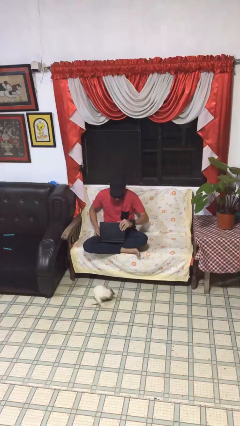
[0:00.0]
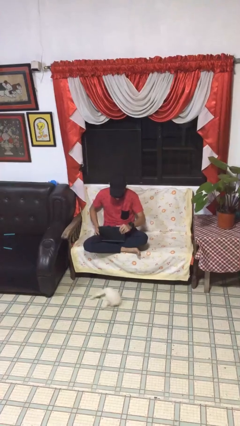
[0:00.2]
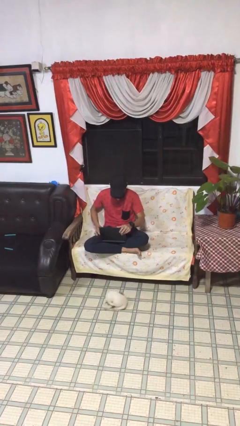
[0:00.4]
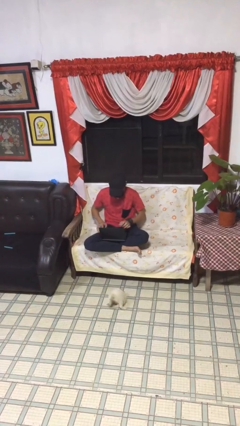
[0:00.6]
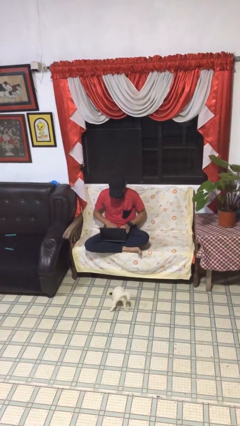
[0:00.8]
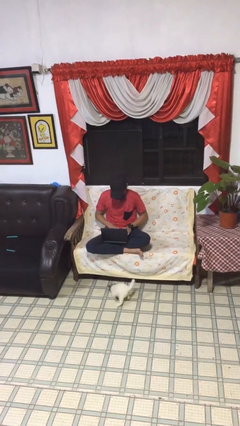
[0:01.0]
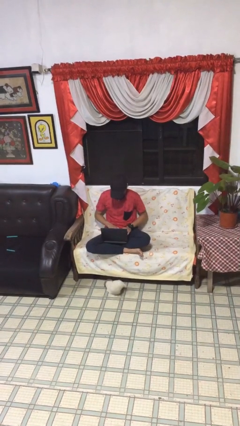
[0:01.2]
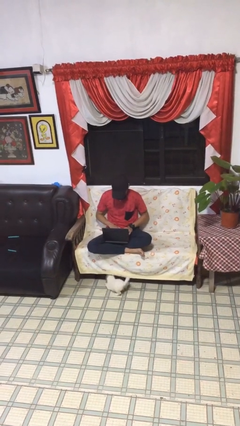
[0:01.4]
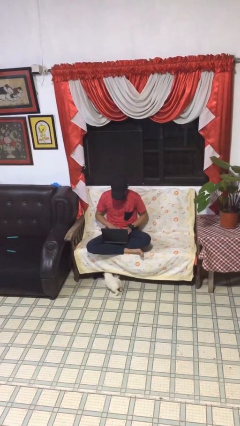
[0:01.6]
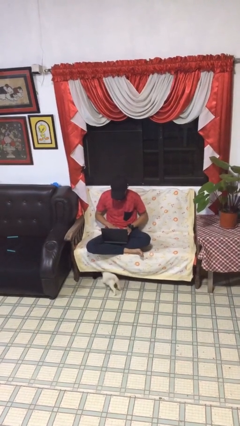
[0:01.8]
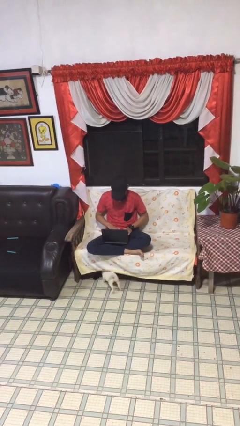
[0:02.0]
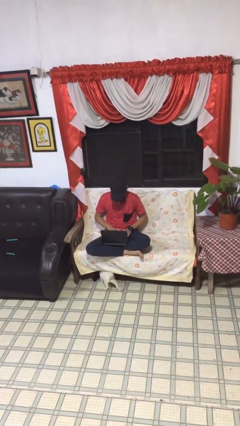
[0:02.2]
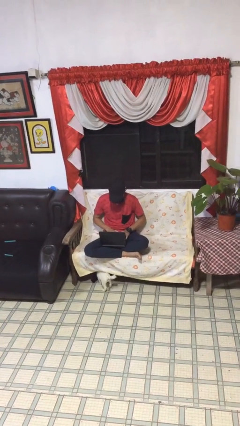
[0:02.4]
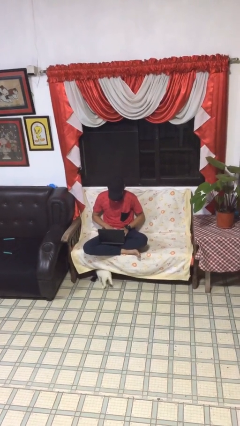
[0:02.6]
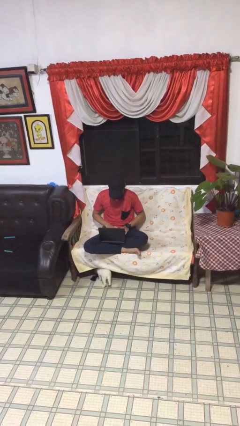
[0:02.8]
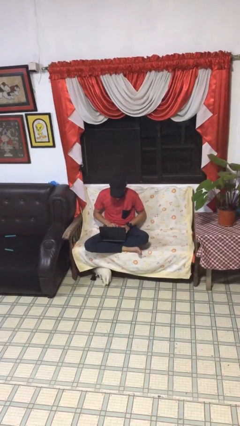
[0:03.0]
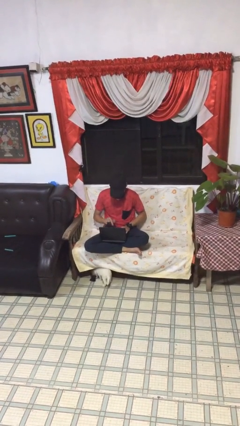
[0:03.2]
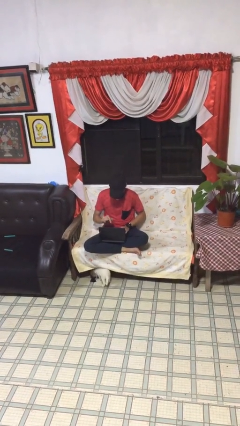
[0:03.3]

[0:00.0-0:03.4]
person interacts with laptop

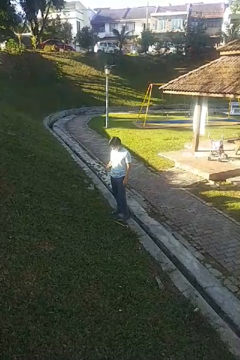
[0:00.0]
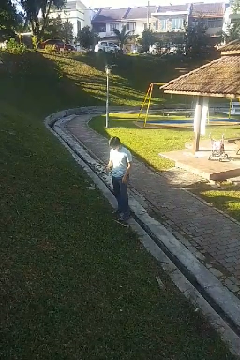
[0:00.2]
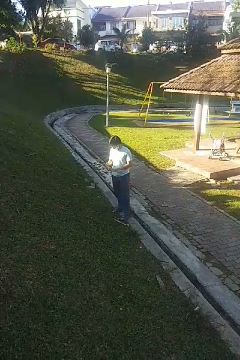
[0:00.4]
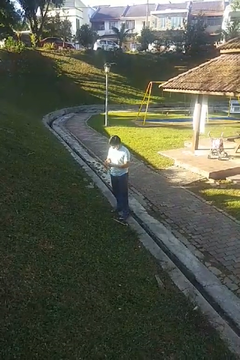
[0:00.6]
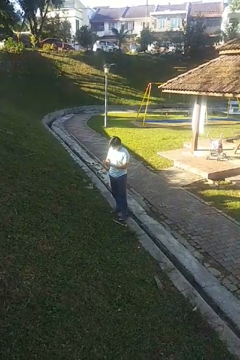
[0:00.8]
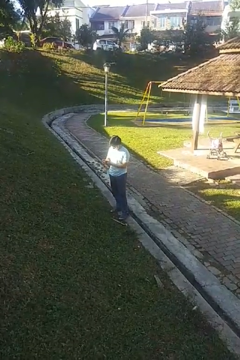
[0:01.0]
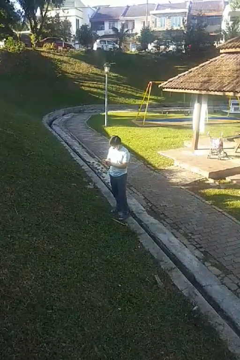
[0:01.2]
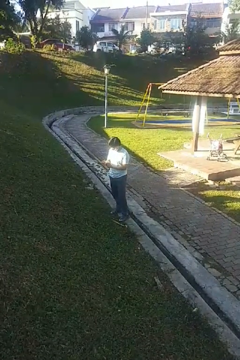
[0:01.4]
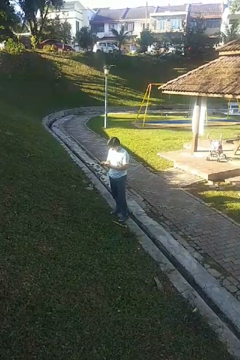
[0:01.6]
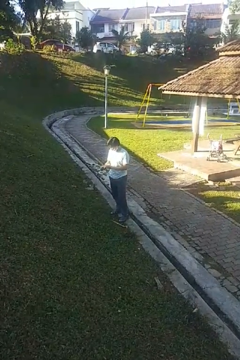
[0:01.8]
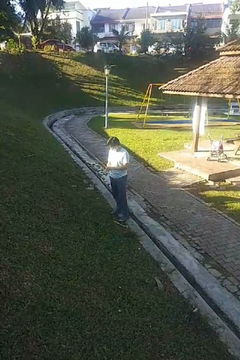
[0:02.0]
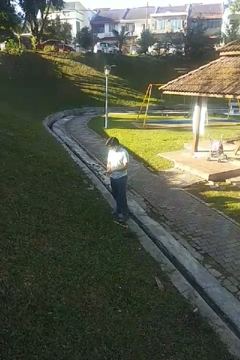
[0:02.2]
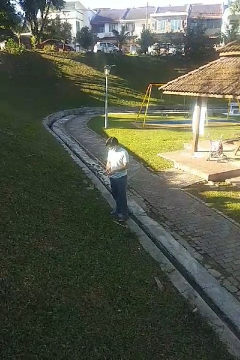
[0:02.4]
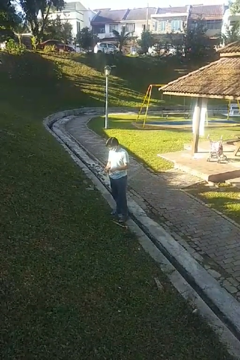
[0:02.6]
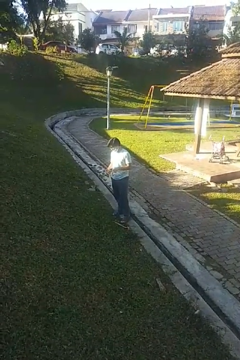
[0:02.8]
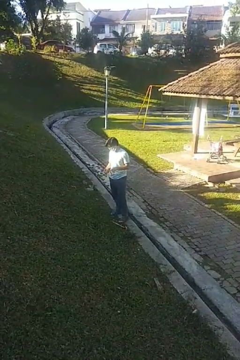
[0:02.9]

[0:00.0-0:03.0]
person takes off wristwatch

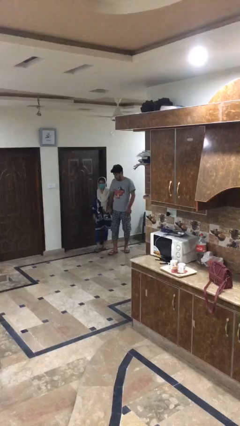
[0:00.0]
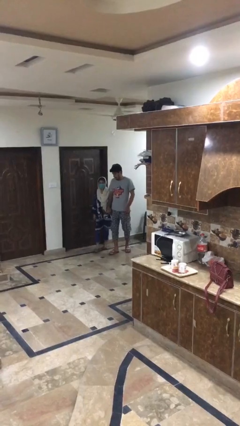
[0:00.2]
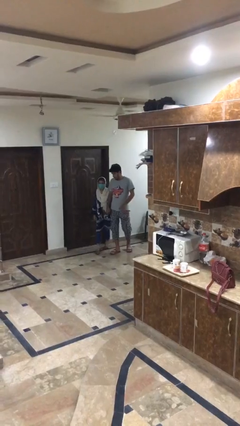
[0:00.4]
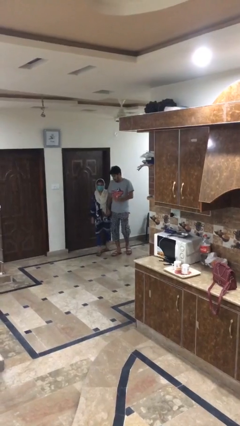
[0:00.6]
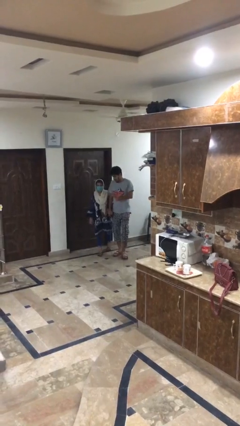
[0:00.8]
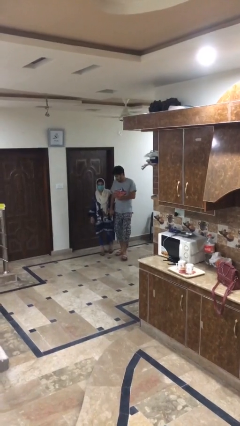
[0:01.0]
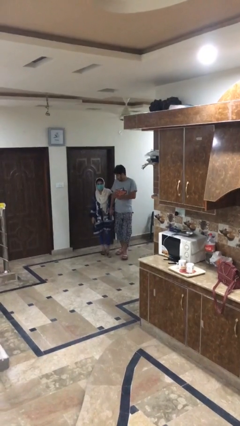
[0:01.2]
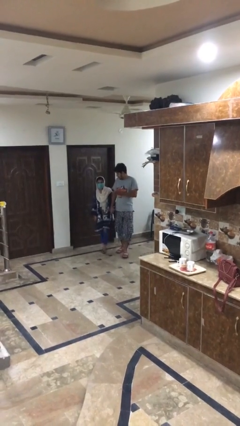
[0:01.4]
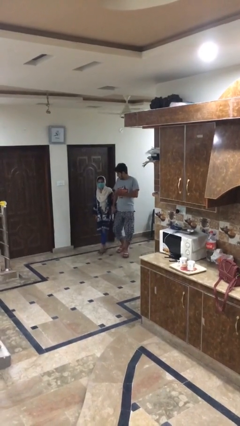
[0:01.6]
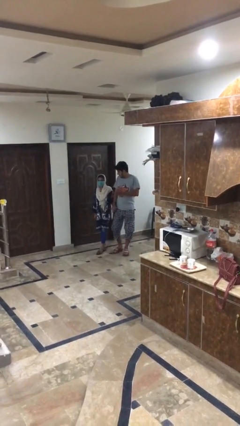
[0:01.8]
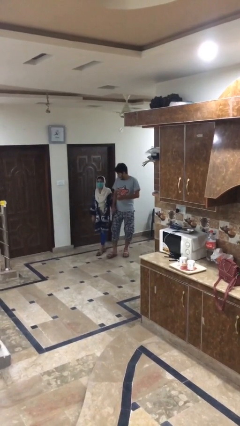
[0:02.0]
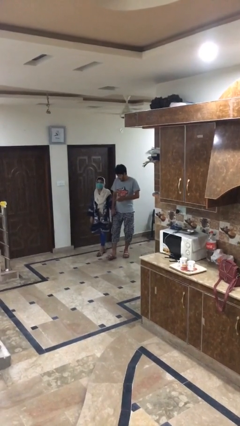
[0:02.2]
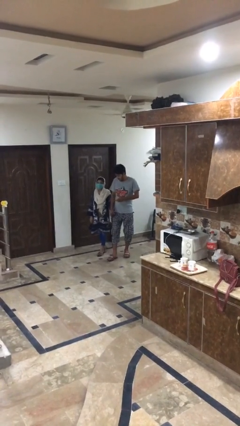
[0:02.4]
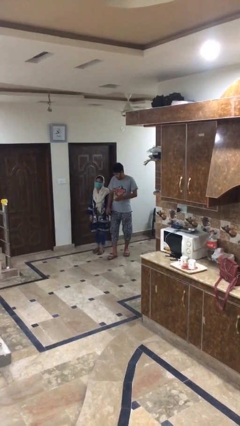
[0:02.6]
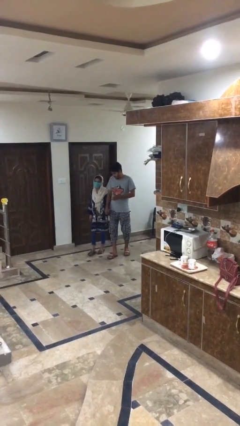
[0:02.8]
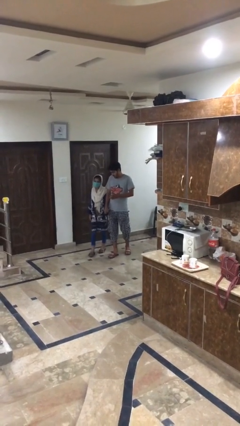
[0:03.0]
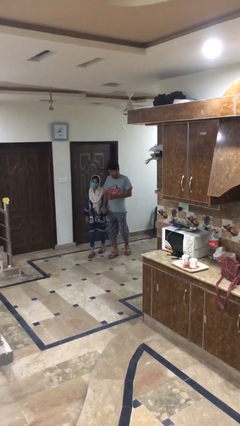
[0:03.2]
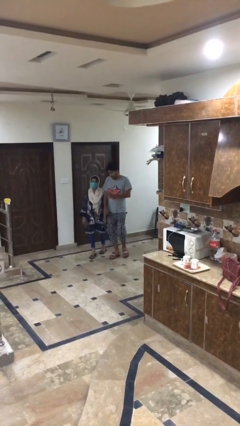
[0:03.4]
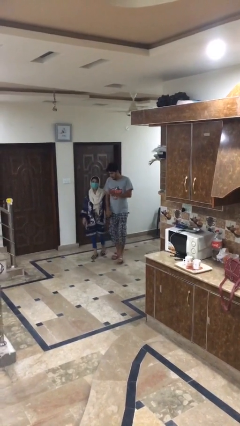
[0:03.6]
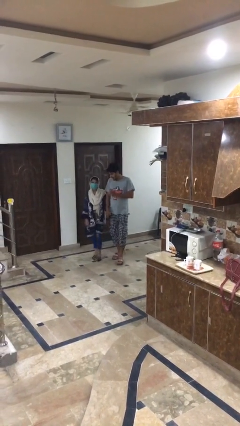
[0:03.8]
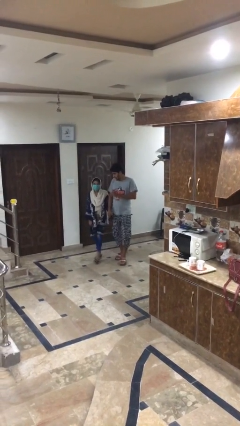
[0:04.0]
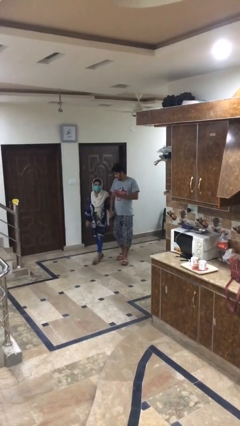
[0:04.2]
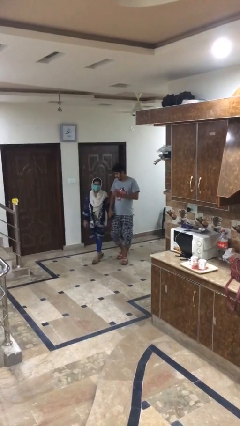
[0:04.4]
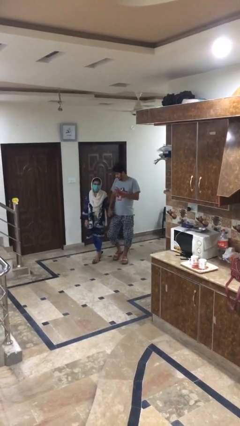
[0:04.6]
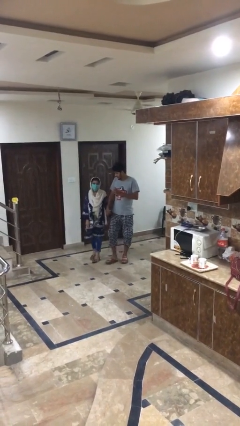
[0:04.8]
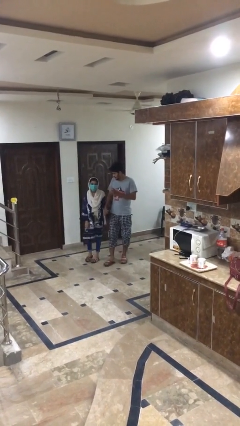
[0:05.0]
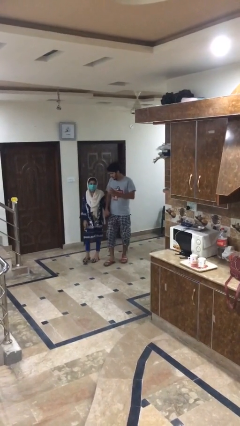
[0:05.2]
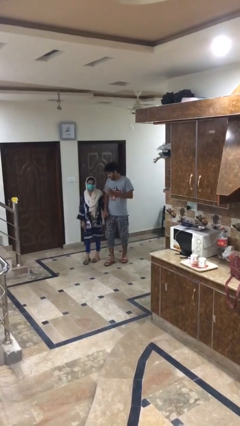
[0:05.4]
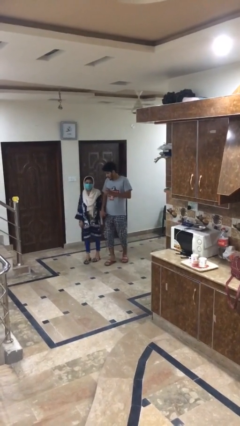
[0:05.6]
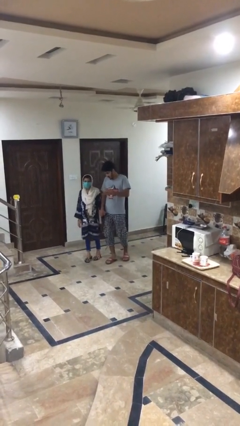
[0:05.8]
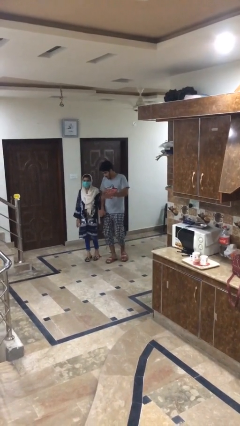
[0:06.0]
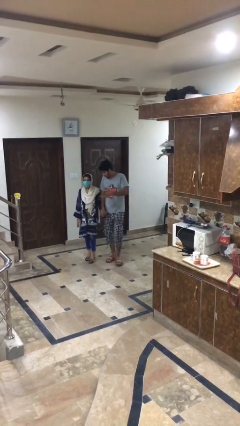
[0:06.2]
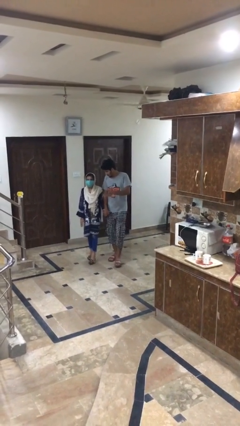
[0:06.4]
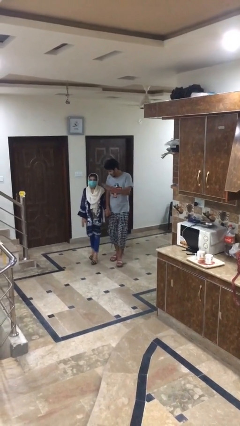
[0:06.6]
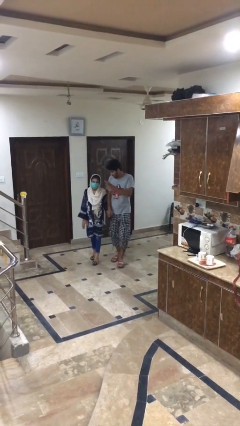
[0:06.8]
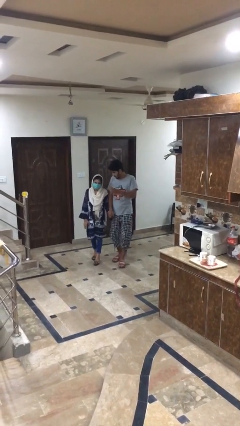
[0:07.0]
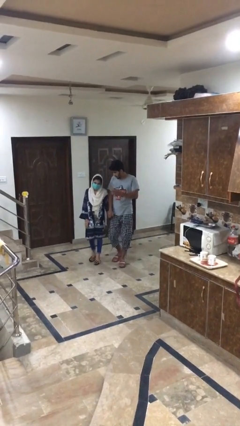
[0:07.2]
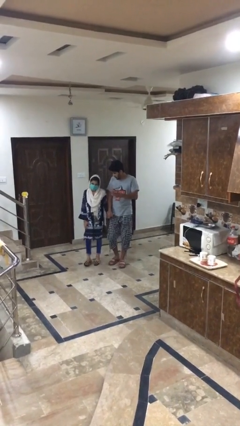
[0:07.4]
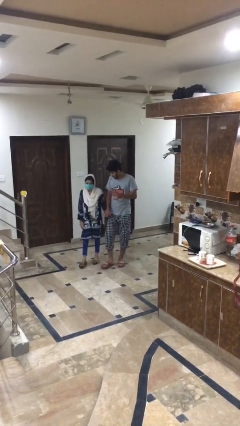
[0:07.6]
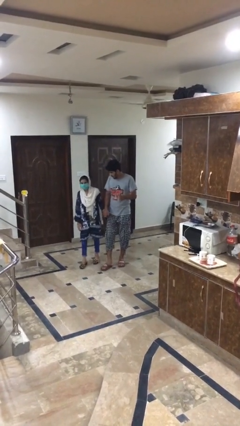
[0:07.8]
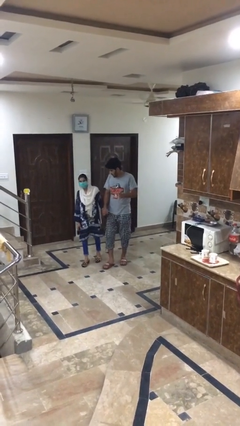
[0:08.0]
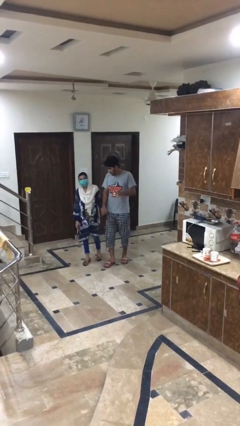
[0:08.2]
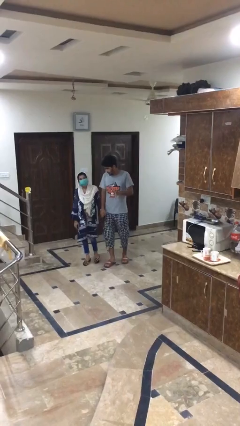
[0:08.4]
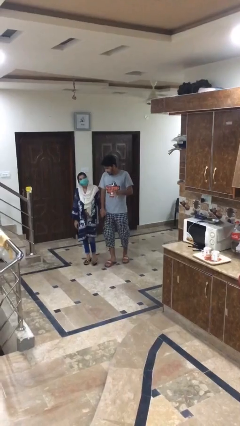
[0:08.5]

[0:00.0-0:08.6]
person holds hand

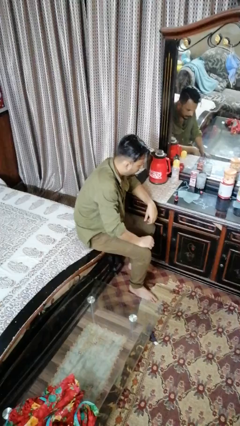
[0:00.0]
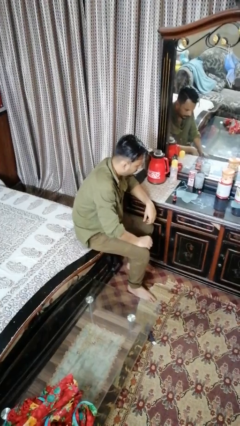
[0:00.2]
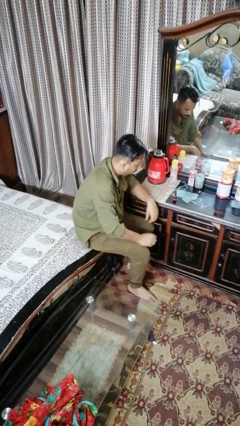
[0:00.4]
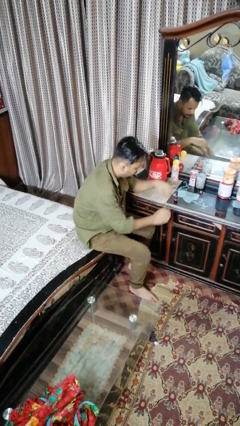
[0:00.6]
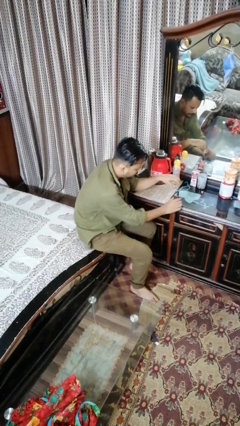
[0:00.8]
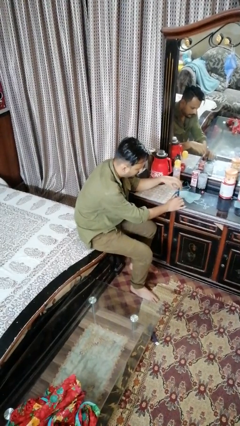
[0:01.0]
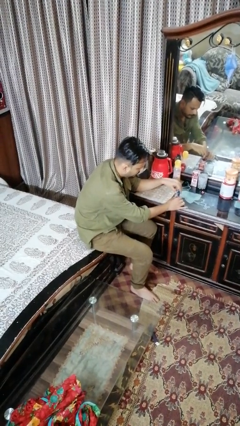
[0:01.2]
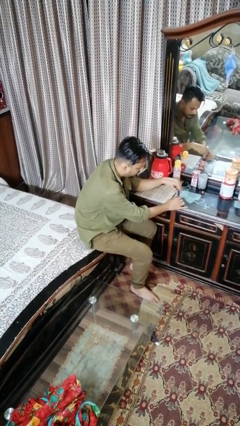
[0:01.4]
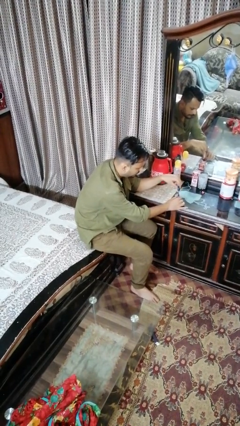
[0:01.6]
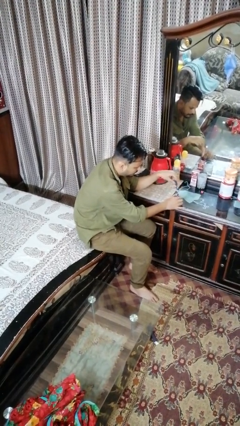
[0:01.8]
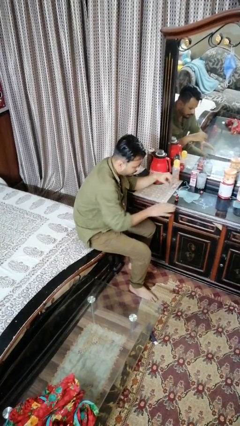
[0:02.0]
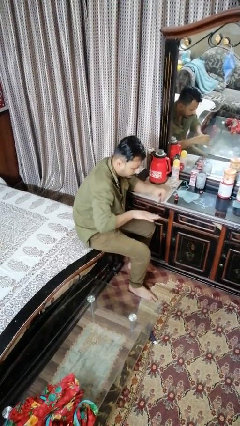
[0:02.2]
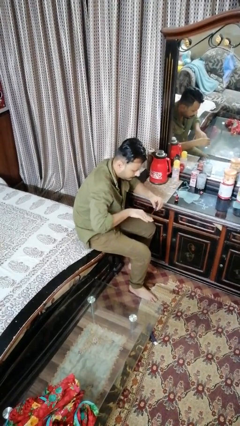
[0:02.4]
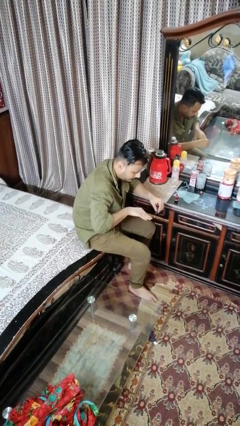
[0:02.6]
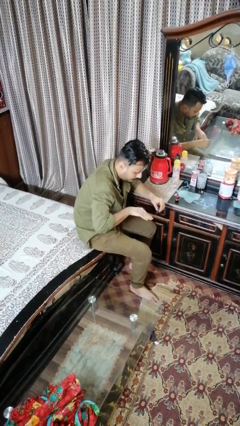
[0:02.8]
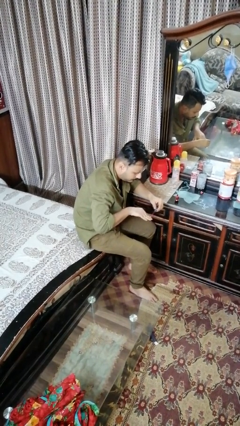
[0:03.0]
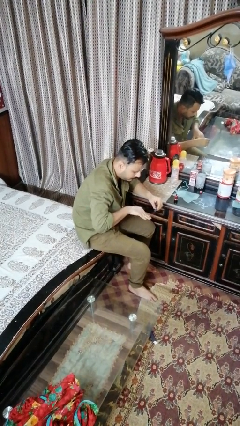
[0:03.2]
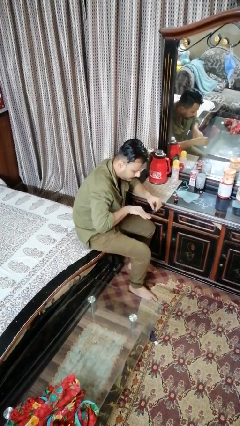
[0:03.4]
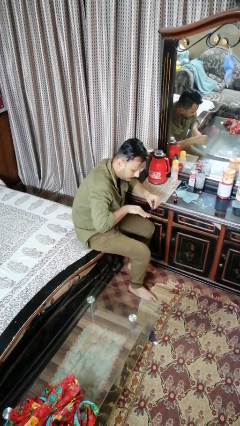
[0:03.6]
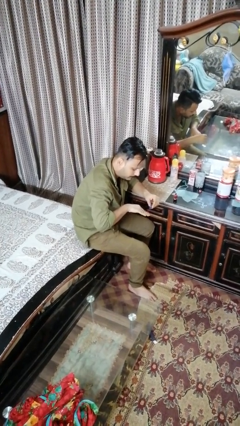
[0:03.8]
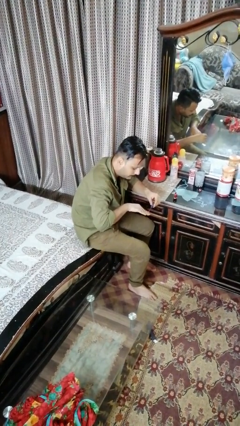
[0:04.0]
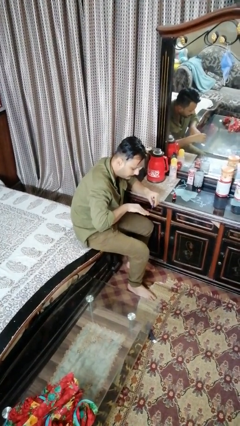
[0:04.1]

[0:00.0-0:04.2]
person paints fingernails
